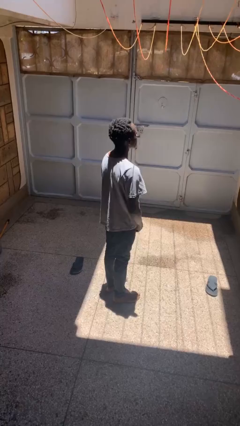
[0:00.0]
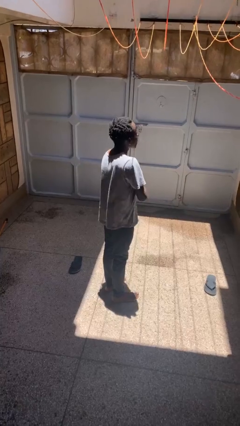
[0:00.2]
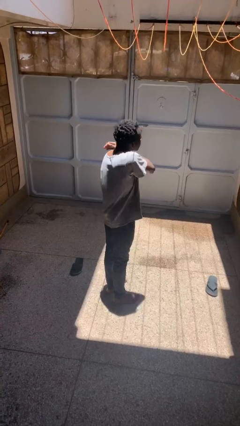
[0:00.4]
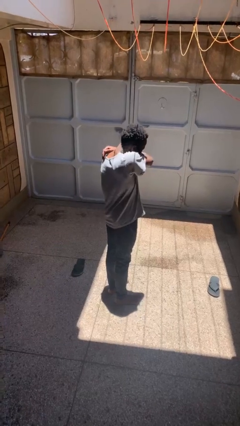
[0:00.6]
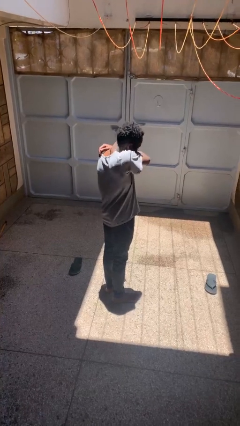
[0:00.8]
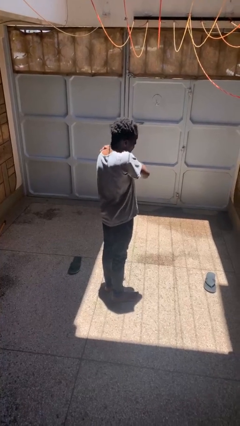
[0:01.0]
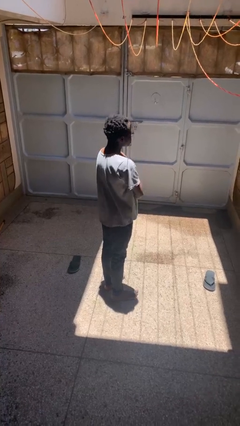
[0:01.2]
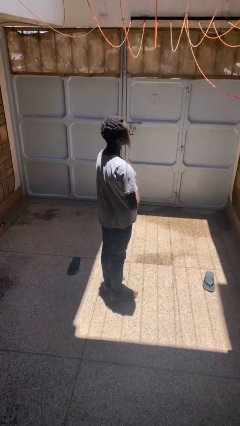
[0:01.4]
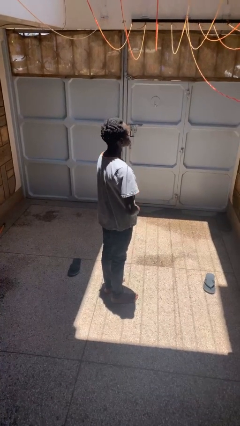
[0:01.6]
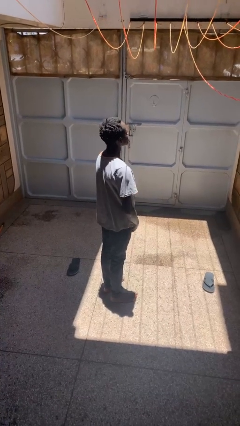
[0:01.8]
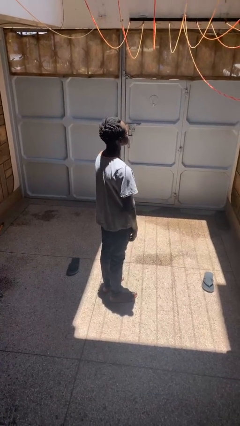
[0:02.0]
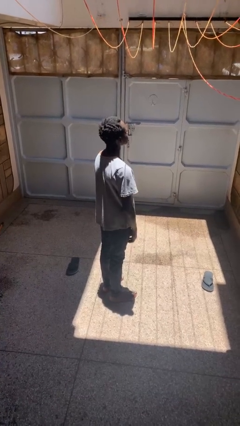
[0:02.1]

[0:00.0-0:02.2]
person sneezes into arm

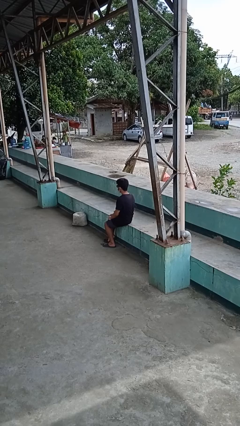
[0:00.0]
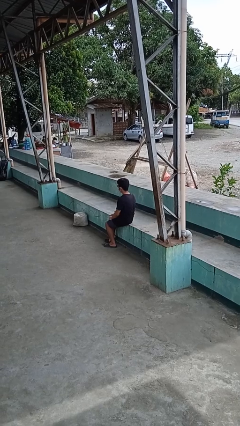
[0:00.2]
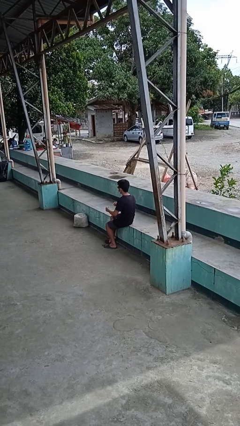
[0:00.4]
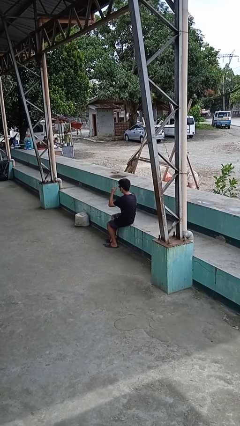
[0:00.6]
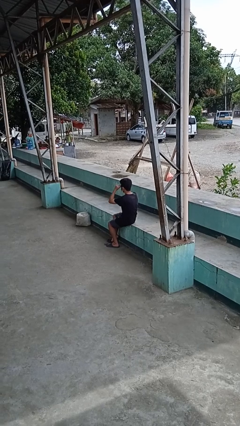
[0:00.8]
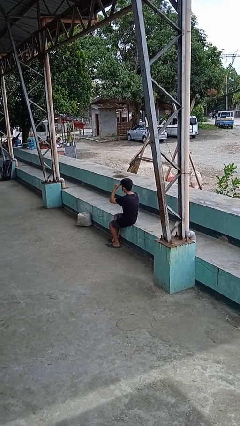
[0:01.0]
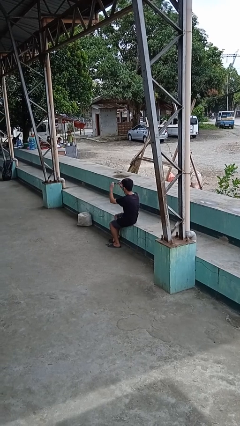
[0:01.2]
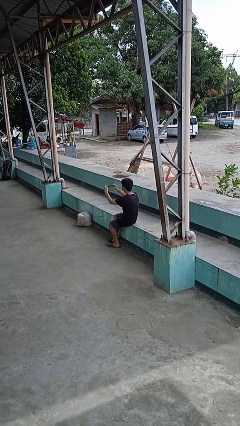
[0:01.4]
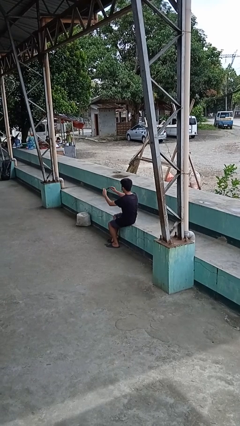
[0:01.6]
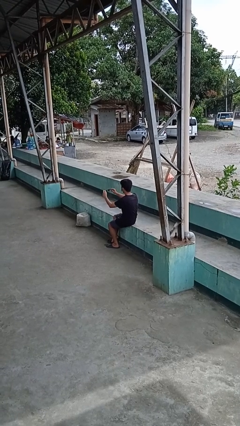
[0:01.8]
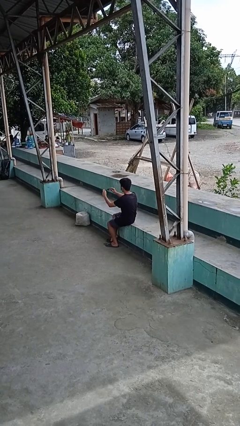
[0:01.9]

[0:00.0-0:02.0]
person takes off sunglasses

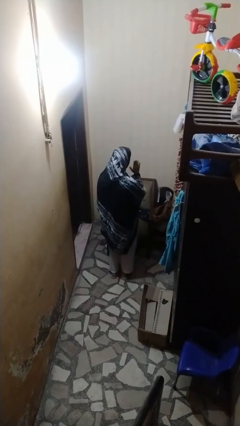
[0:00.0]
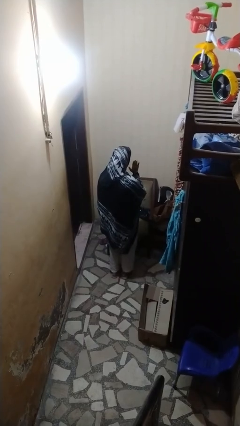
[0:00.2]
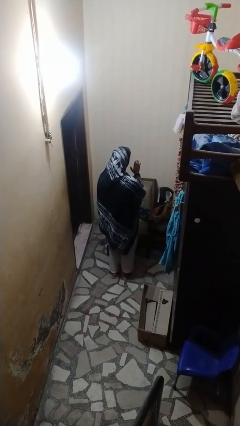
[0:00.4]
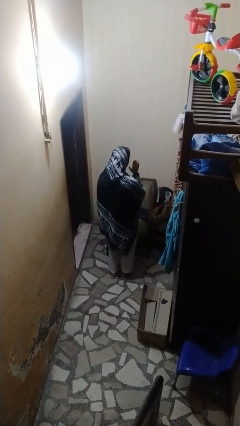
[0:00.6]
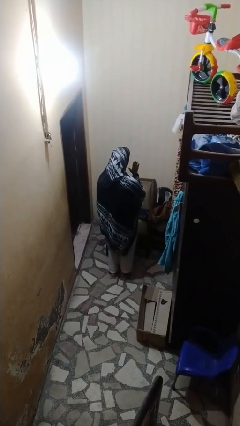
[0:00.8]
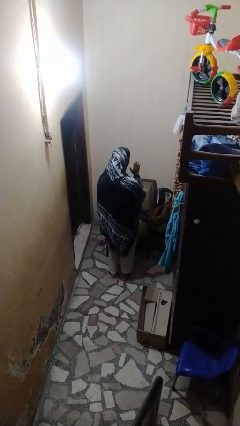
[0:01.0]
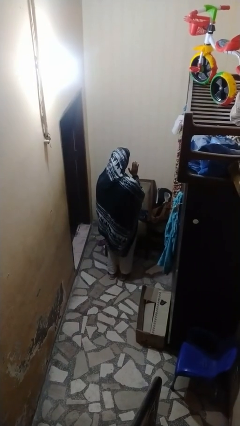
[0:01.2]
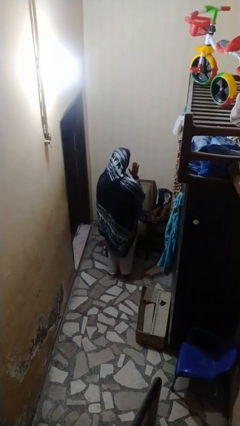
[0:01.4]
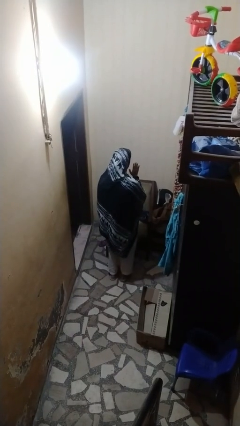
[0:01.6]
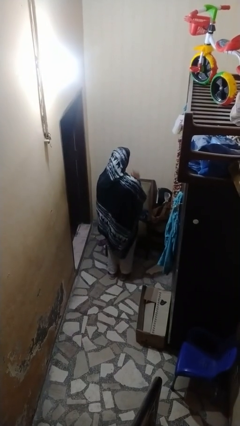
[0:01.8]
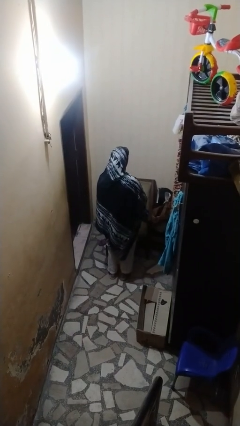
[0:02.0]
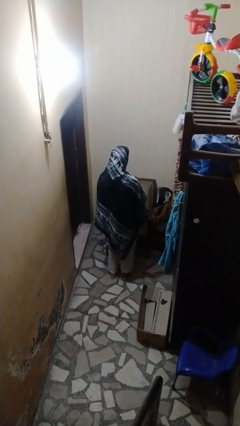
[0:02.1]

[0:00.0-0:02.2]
person gestures stop

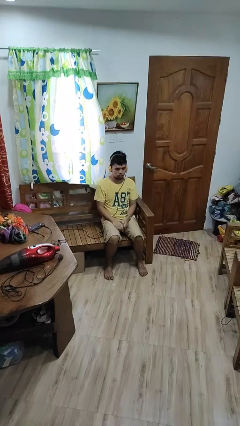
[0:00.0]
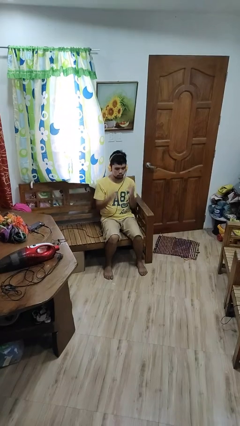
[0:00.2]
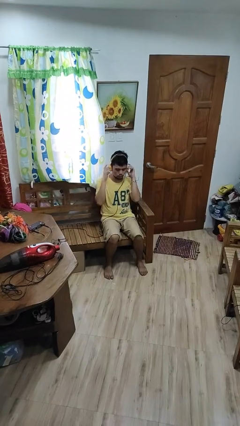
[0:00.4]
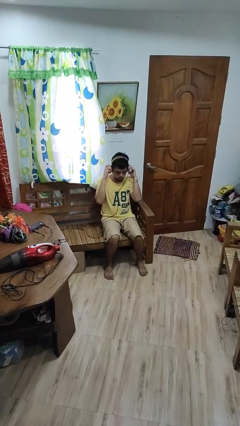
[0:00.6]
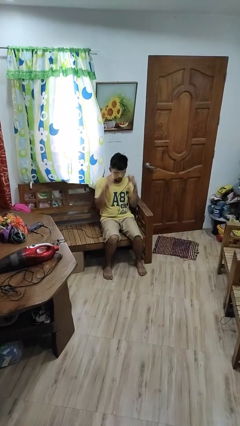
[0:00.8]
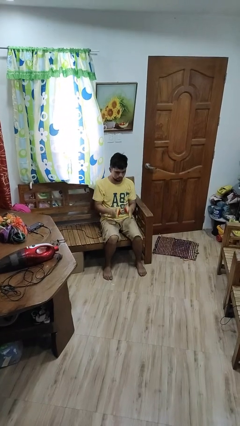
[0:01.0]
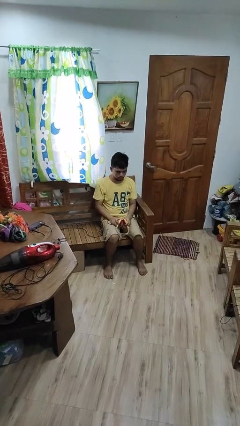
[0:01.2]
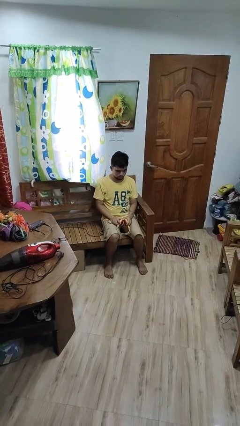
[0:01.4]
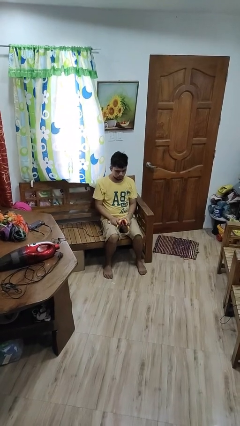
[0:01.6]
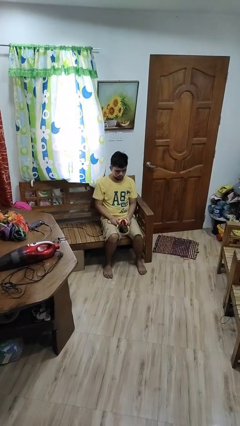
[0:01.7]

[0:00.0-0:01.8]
person takes off headphones

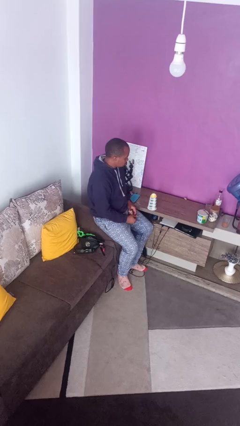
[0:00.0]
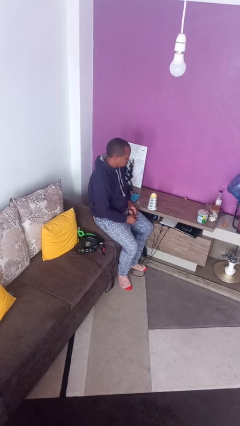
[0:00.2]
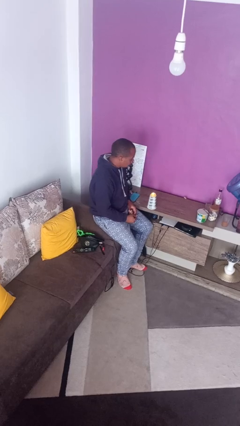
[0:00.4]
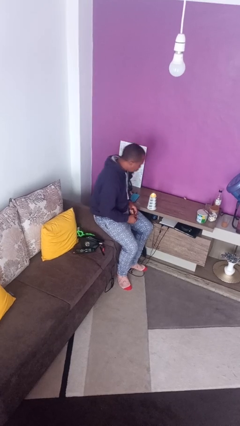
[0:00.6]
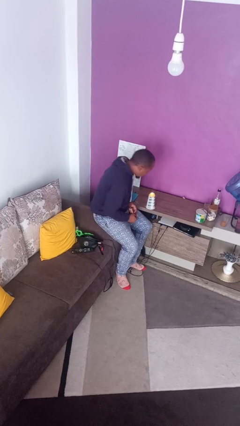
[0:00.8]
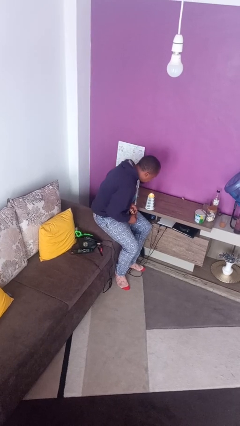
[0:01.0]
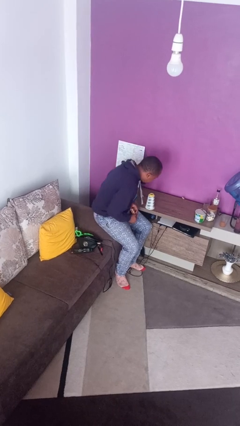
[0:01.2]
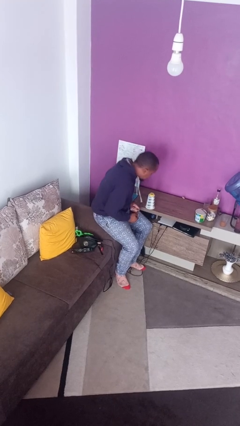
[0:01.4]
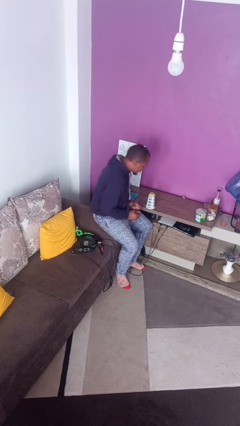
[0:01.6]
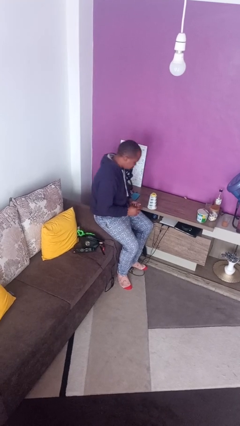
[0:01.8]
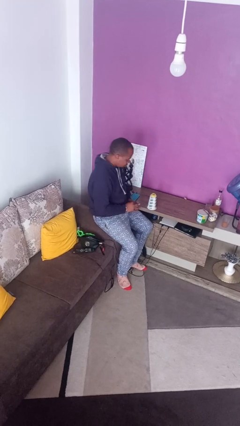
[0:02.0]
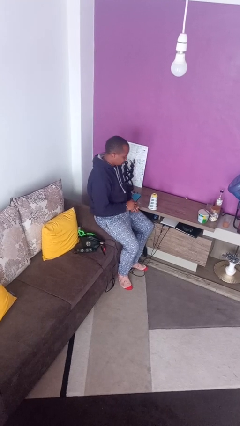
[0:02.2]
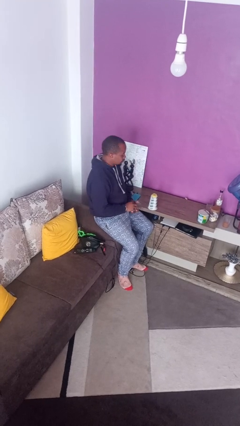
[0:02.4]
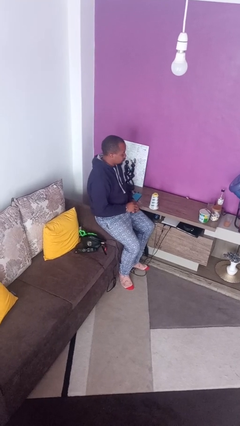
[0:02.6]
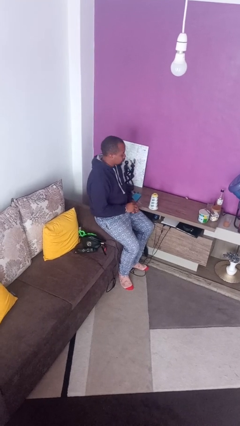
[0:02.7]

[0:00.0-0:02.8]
person extinguishes candle

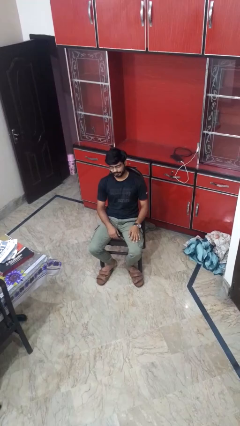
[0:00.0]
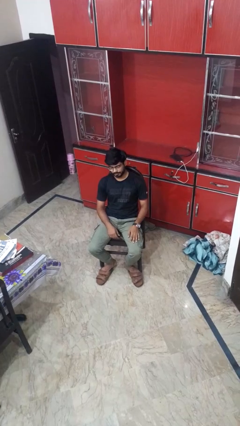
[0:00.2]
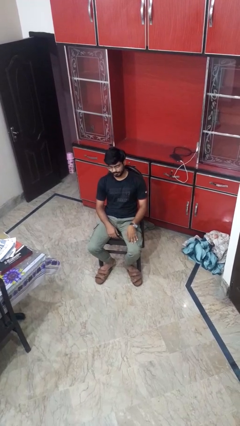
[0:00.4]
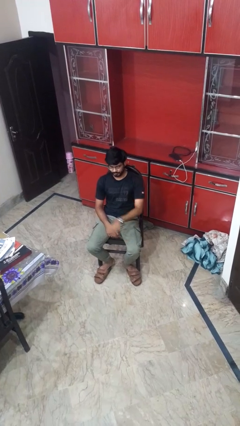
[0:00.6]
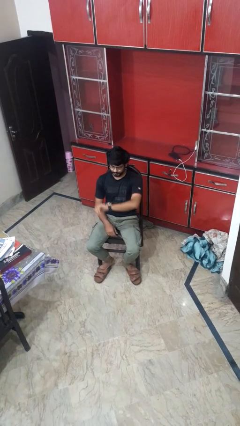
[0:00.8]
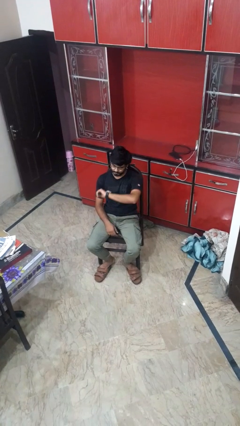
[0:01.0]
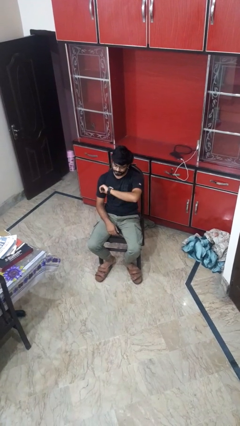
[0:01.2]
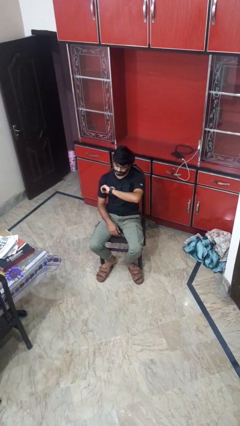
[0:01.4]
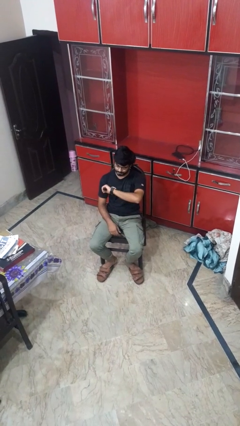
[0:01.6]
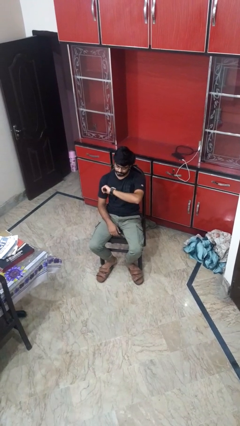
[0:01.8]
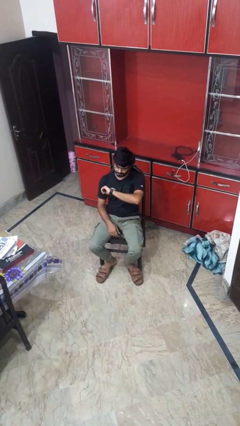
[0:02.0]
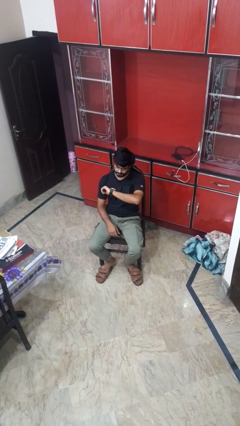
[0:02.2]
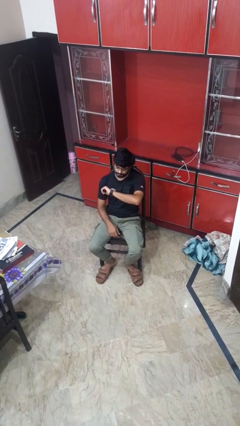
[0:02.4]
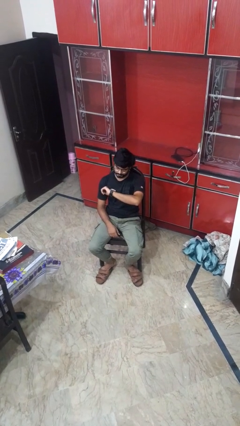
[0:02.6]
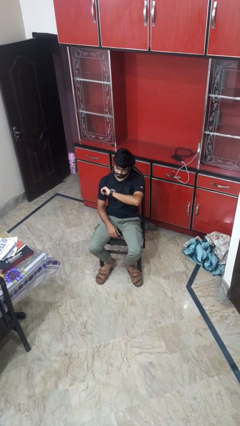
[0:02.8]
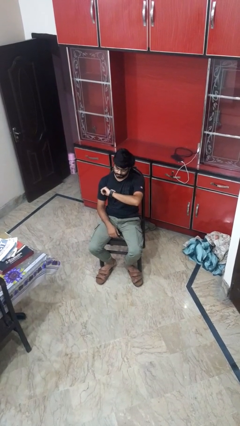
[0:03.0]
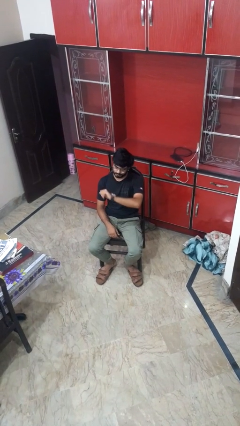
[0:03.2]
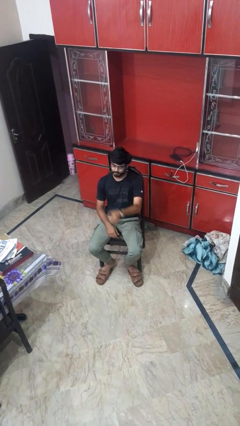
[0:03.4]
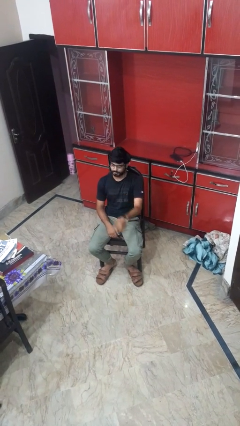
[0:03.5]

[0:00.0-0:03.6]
person looks at wristwatch

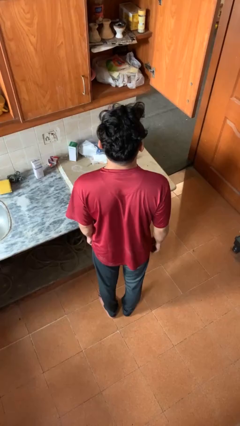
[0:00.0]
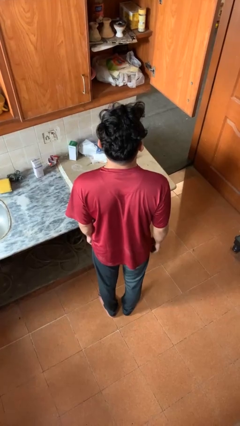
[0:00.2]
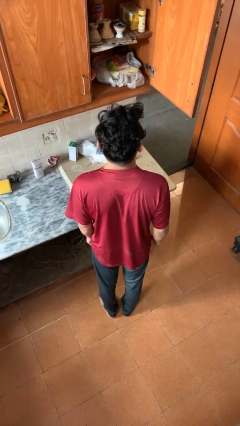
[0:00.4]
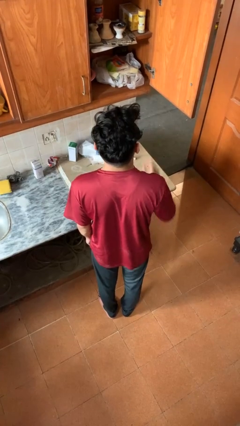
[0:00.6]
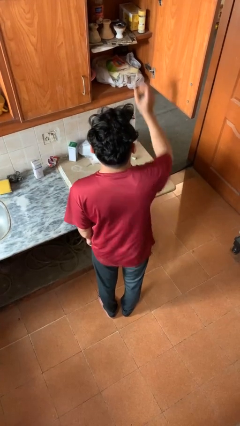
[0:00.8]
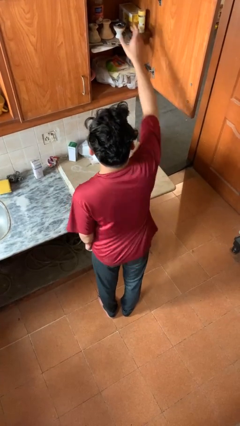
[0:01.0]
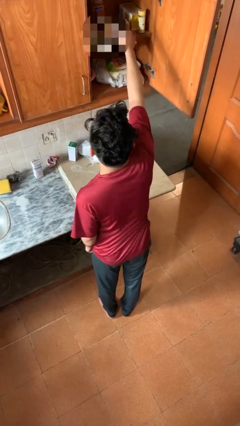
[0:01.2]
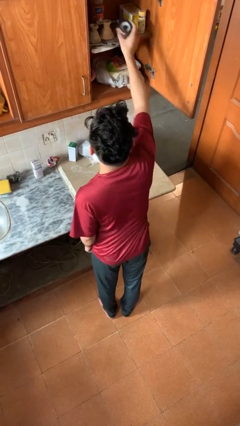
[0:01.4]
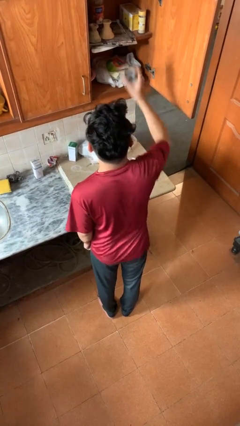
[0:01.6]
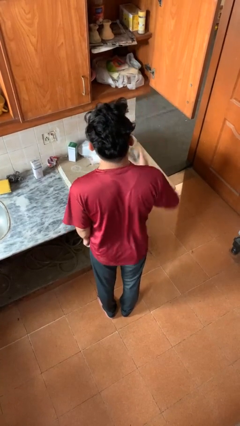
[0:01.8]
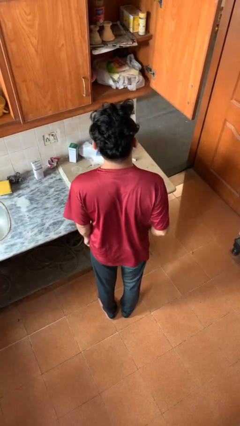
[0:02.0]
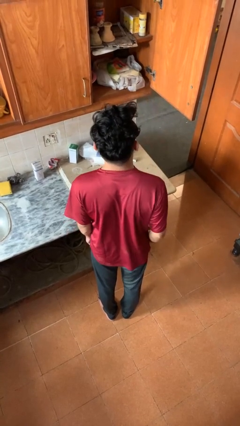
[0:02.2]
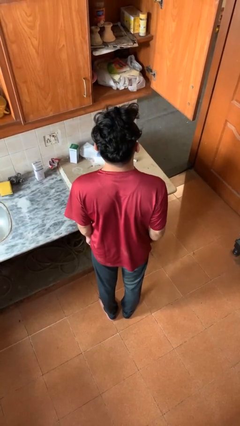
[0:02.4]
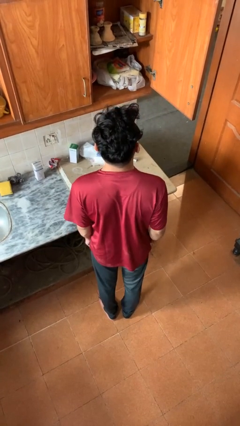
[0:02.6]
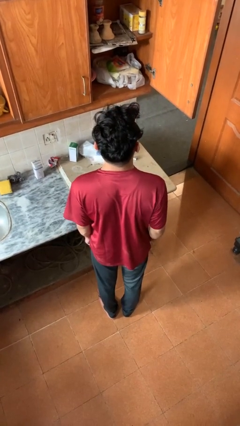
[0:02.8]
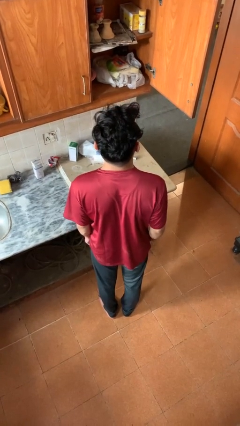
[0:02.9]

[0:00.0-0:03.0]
person takes object from cabinet
